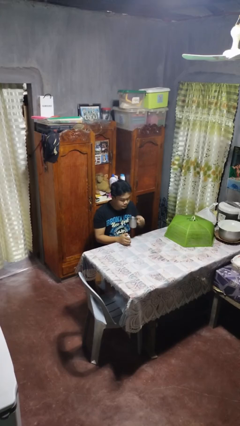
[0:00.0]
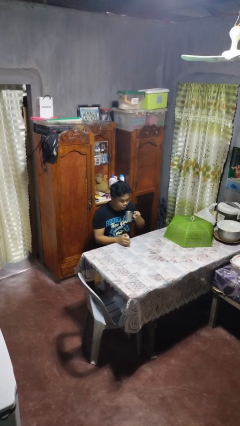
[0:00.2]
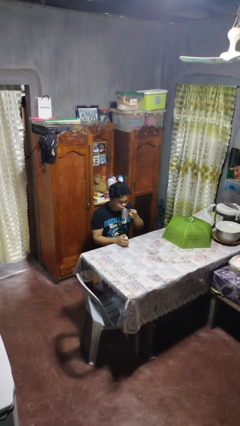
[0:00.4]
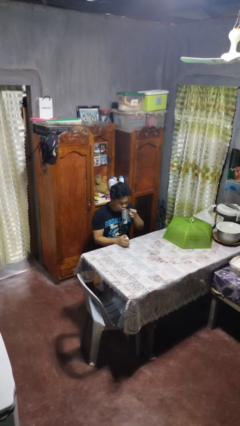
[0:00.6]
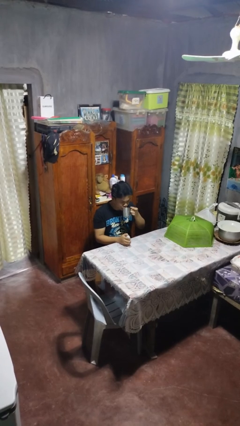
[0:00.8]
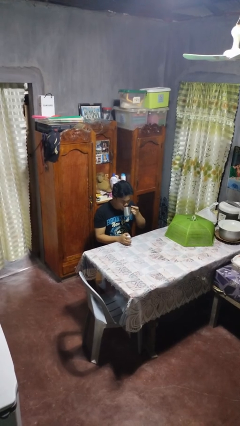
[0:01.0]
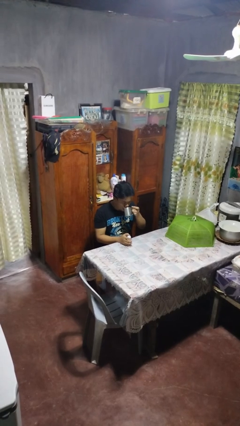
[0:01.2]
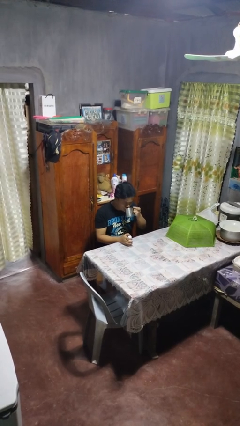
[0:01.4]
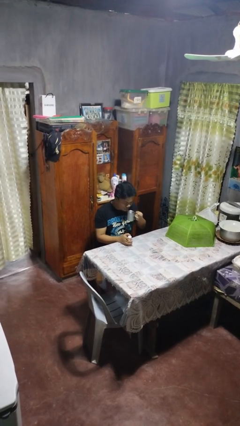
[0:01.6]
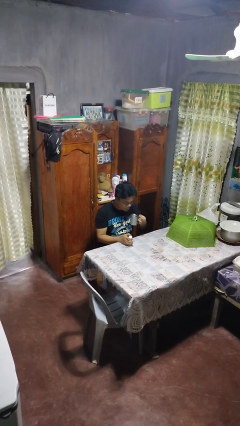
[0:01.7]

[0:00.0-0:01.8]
person drinks from cup

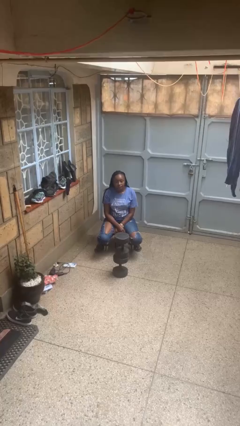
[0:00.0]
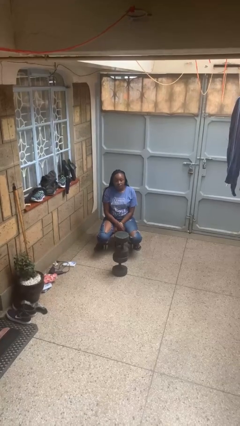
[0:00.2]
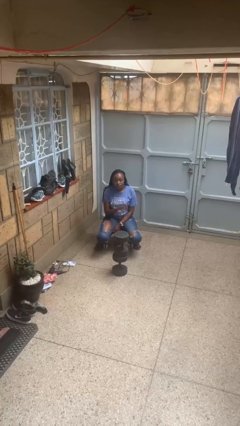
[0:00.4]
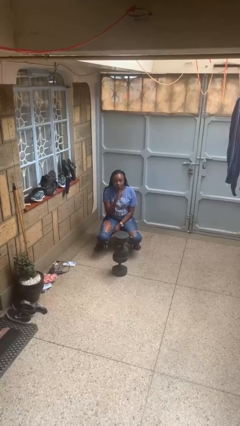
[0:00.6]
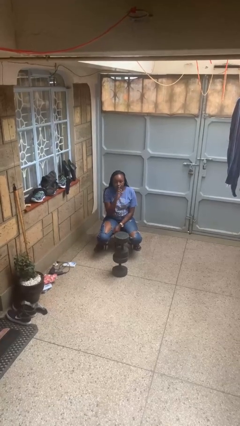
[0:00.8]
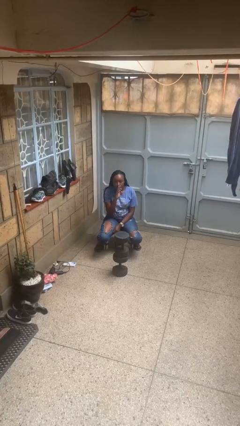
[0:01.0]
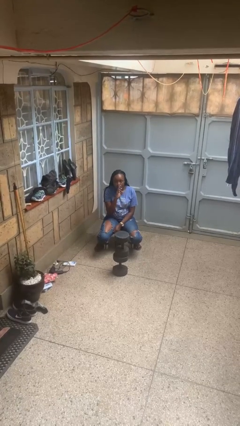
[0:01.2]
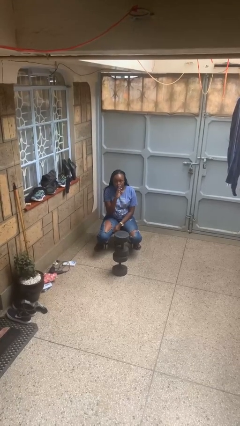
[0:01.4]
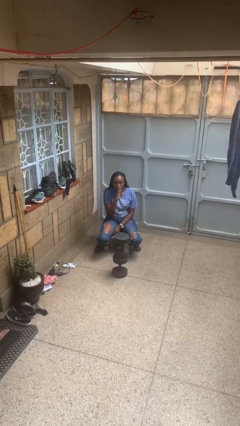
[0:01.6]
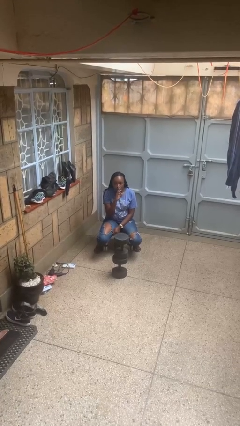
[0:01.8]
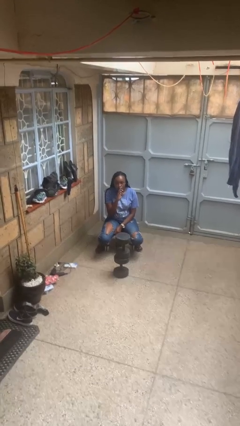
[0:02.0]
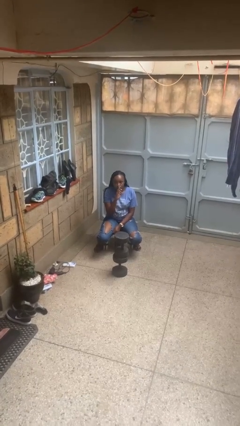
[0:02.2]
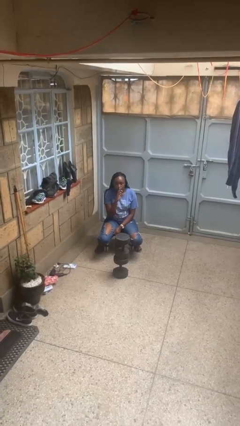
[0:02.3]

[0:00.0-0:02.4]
person gestures be quiet

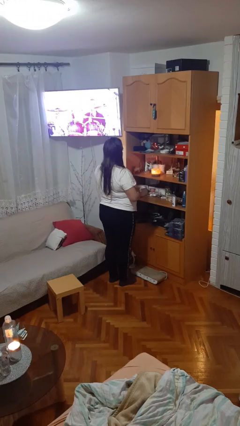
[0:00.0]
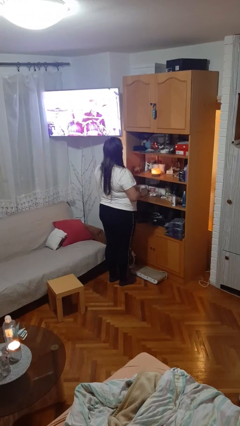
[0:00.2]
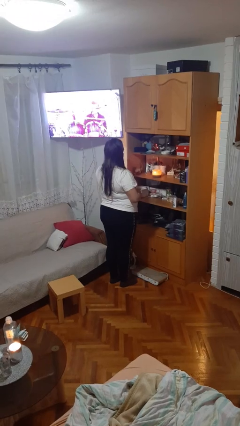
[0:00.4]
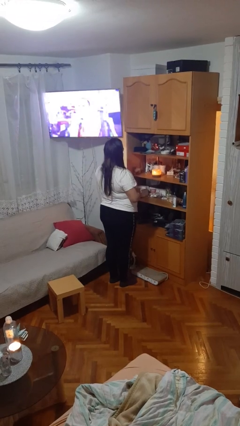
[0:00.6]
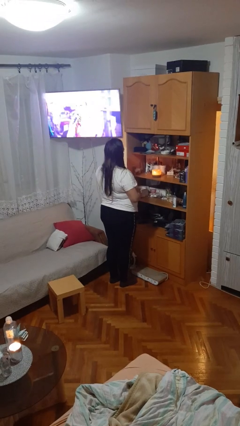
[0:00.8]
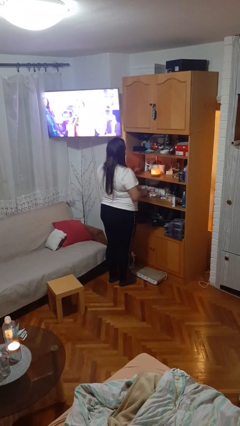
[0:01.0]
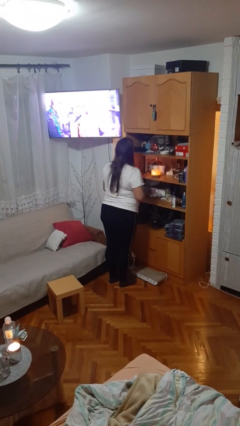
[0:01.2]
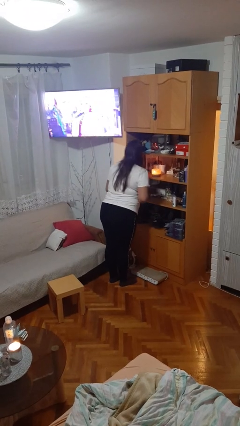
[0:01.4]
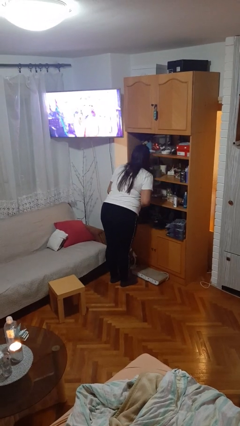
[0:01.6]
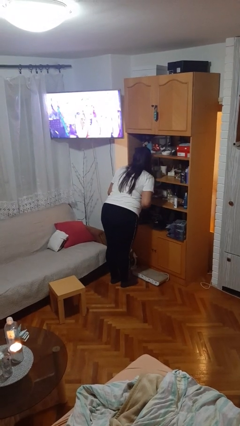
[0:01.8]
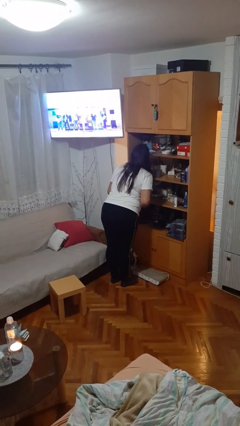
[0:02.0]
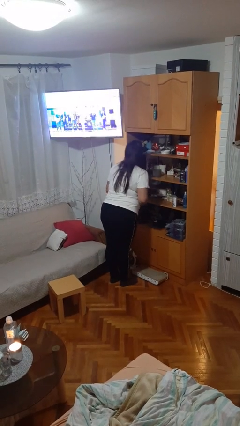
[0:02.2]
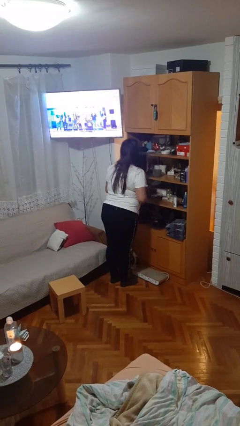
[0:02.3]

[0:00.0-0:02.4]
person extinguishes candle

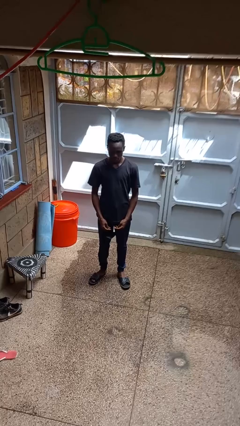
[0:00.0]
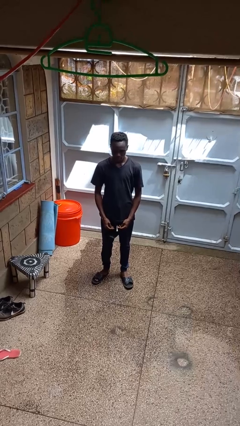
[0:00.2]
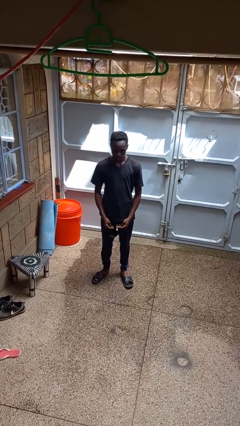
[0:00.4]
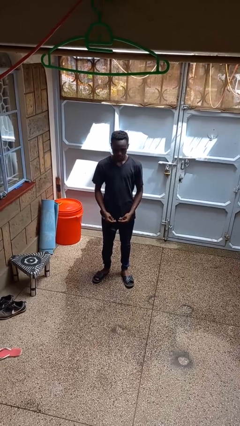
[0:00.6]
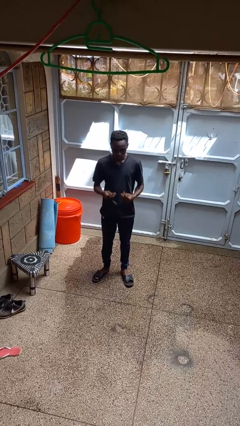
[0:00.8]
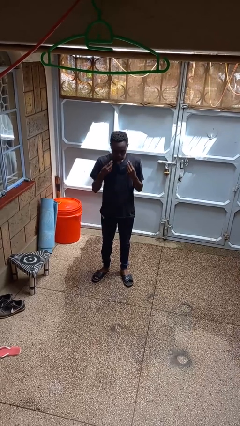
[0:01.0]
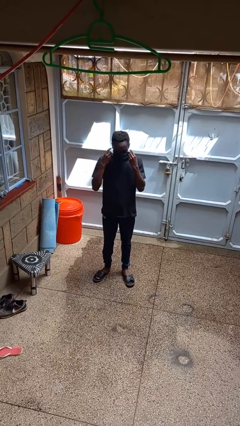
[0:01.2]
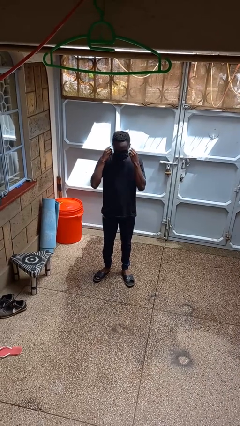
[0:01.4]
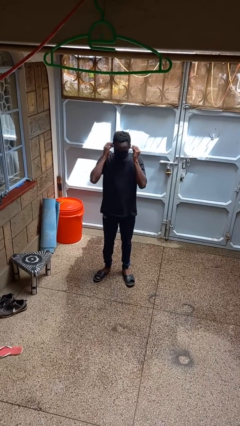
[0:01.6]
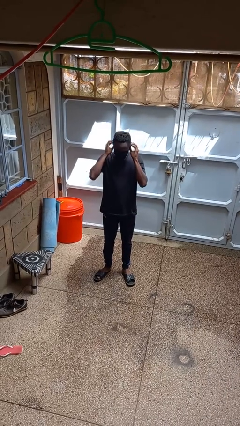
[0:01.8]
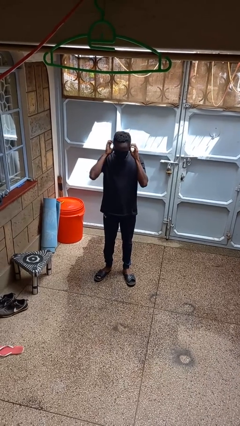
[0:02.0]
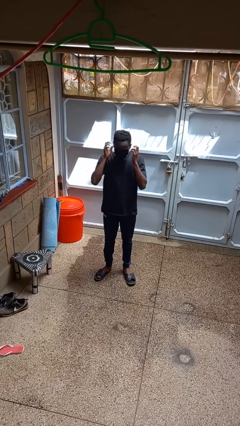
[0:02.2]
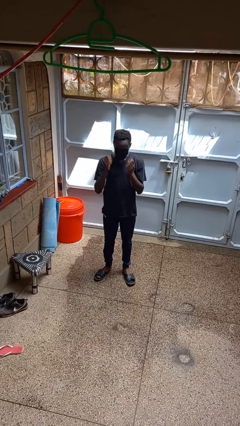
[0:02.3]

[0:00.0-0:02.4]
person puts on facemask

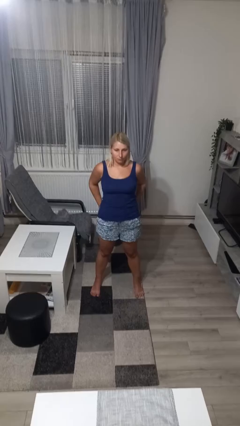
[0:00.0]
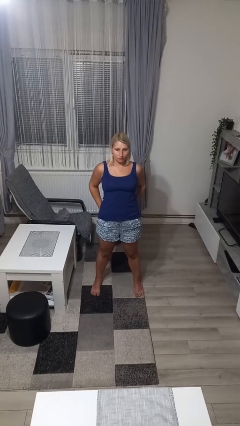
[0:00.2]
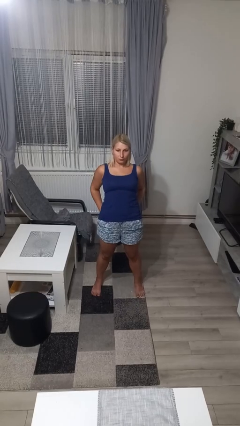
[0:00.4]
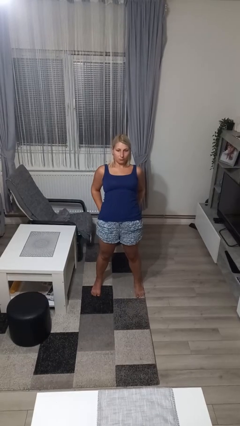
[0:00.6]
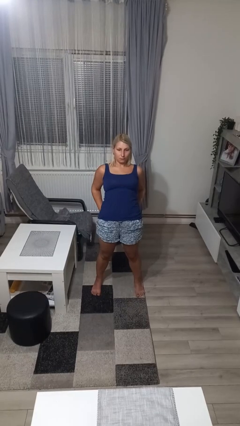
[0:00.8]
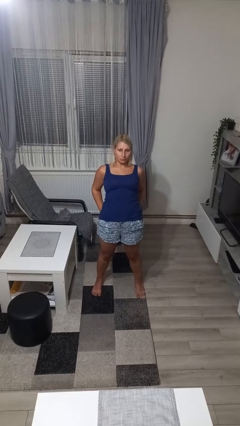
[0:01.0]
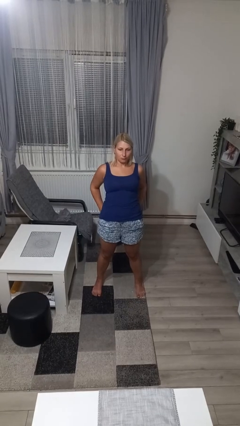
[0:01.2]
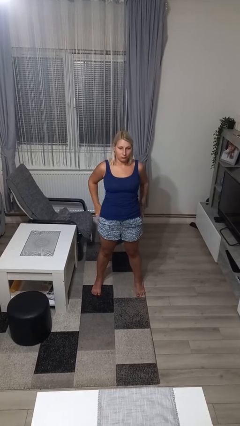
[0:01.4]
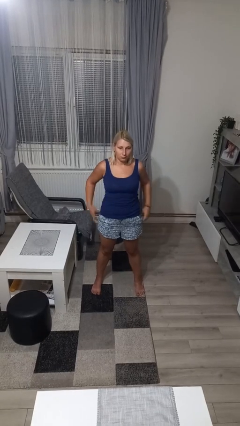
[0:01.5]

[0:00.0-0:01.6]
person stretches back

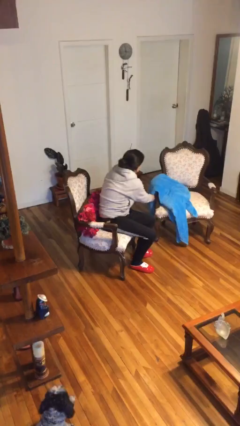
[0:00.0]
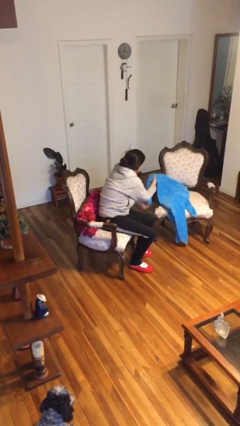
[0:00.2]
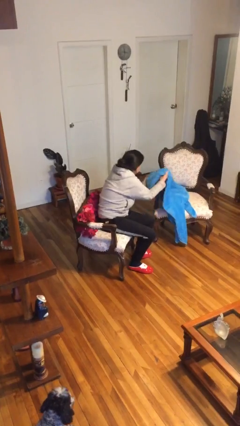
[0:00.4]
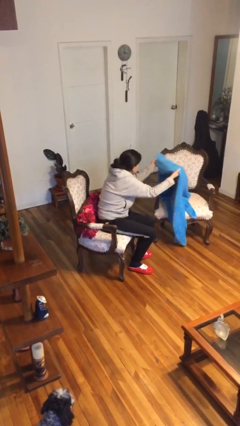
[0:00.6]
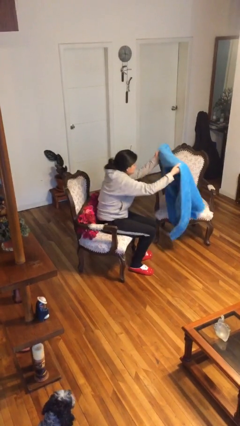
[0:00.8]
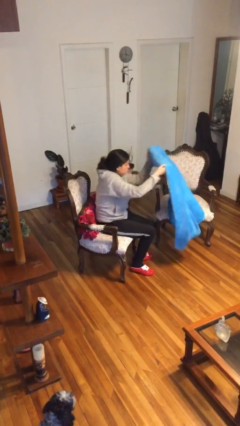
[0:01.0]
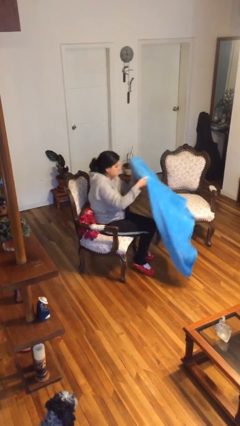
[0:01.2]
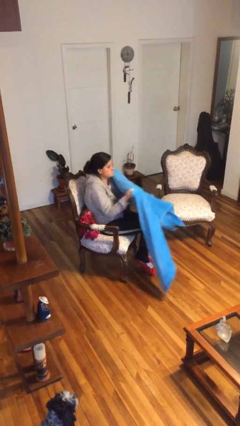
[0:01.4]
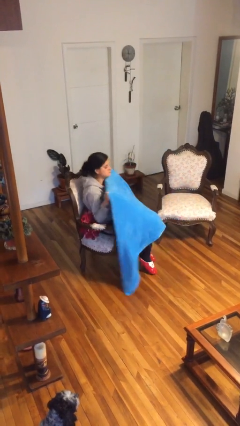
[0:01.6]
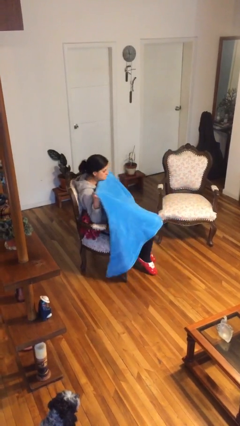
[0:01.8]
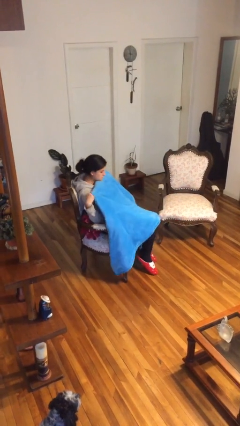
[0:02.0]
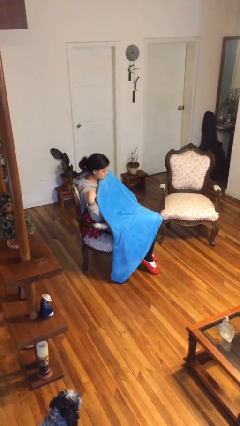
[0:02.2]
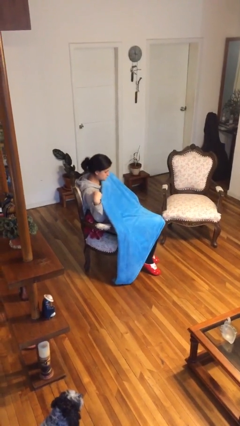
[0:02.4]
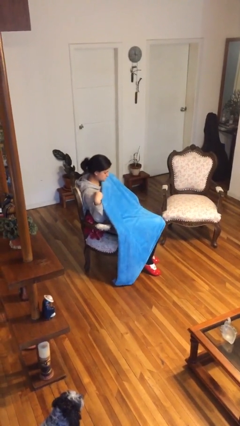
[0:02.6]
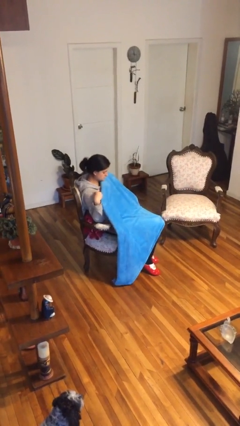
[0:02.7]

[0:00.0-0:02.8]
person covers with blanket

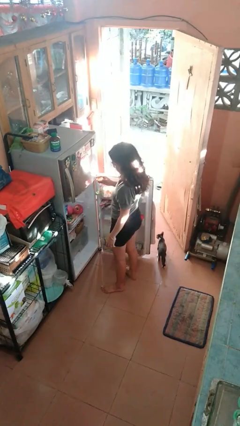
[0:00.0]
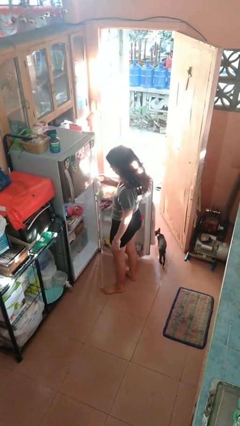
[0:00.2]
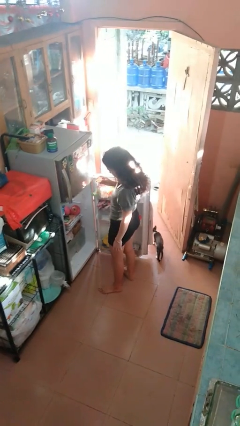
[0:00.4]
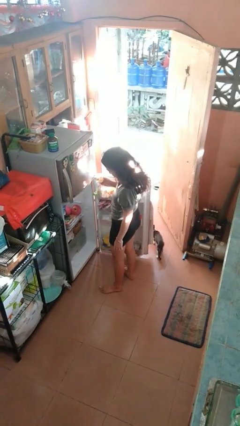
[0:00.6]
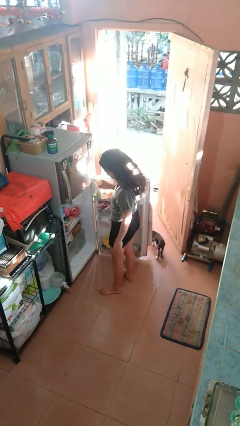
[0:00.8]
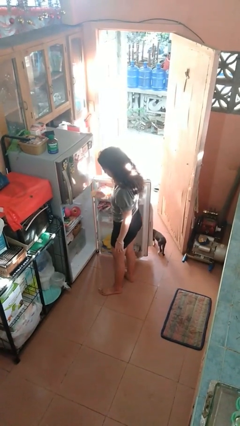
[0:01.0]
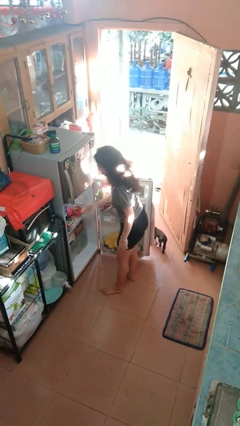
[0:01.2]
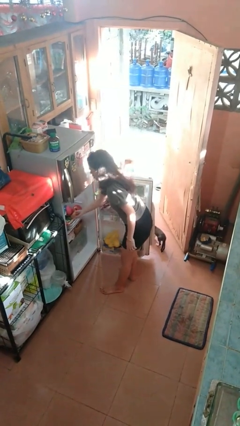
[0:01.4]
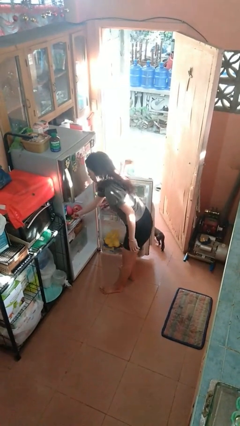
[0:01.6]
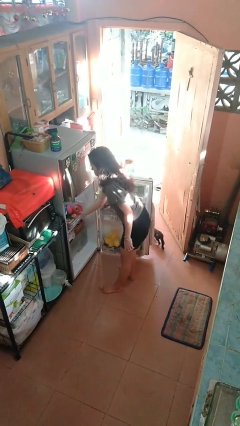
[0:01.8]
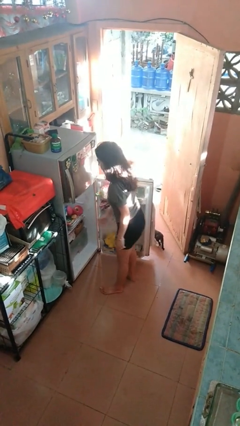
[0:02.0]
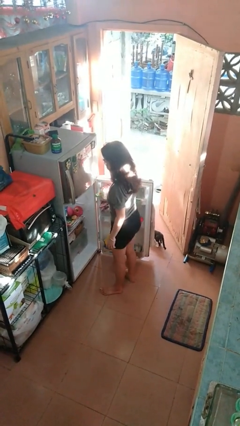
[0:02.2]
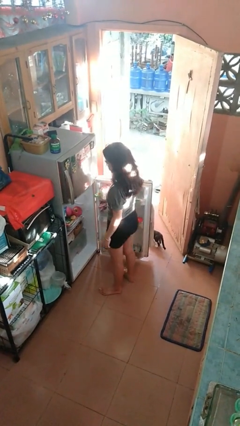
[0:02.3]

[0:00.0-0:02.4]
person puts object into refrigerator

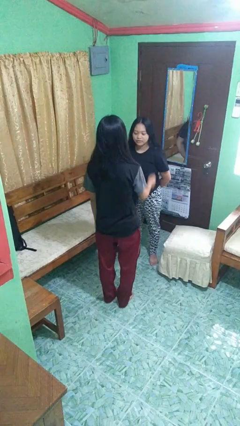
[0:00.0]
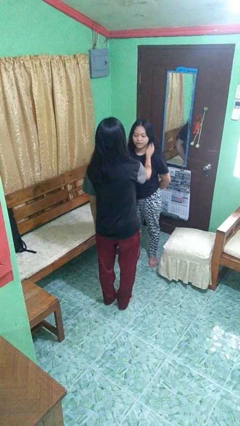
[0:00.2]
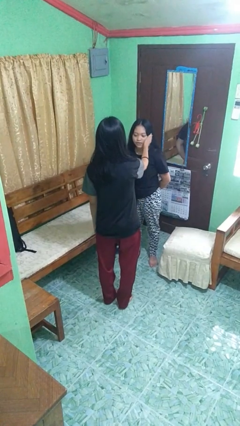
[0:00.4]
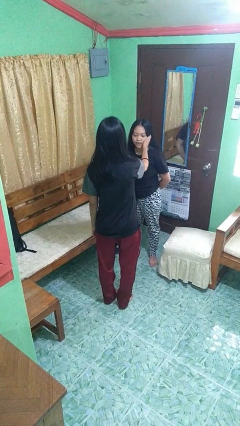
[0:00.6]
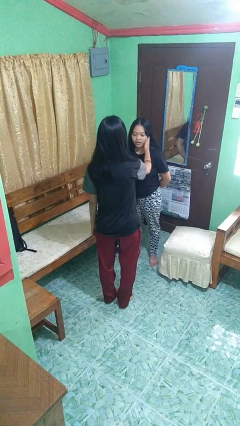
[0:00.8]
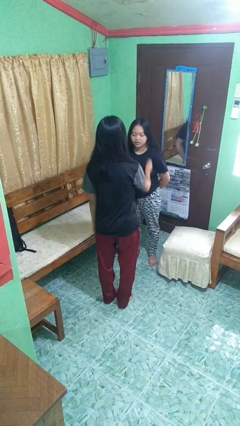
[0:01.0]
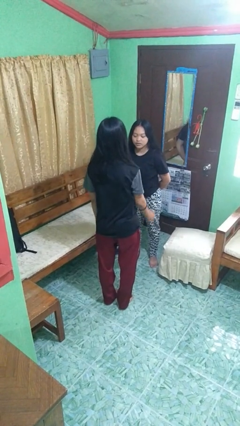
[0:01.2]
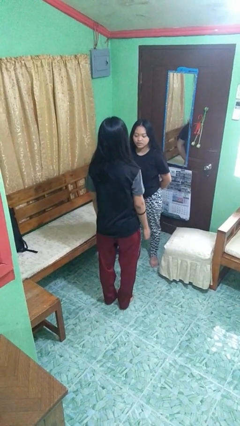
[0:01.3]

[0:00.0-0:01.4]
person touches face of person
